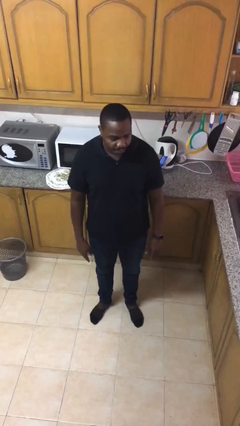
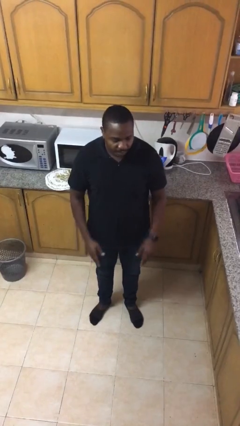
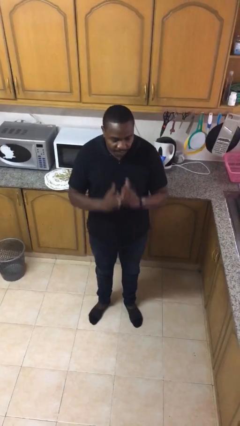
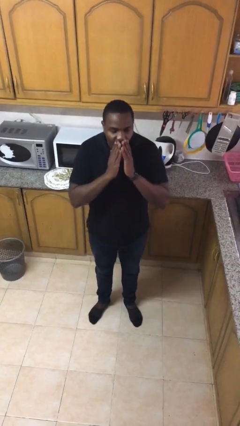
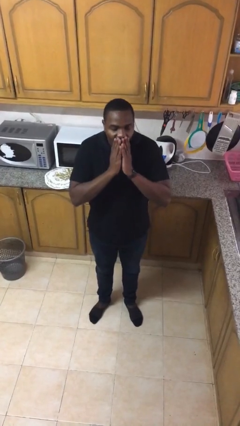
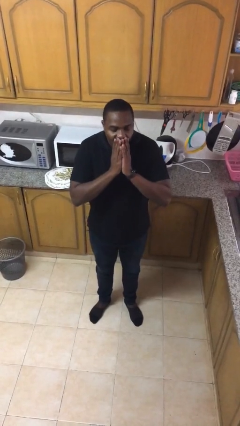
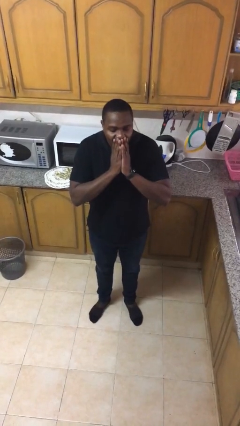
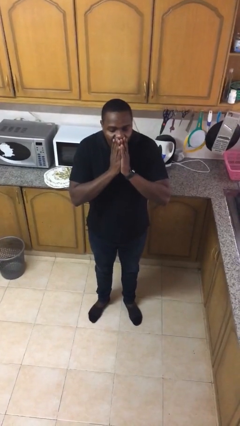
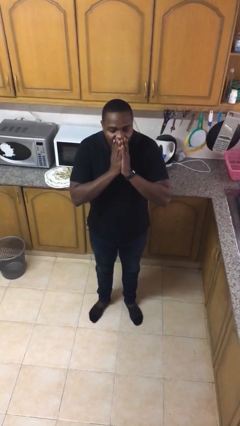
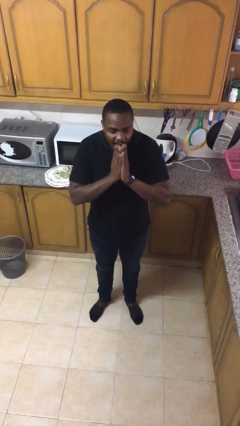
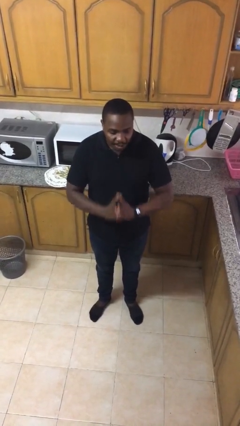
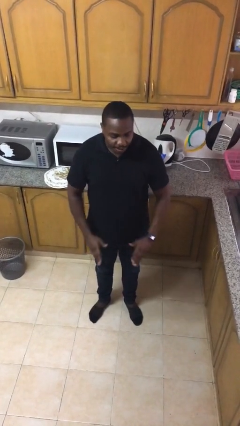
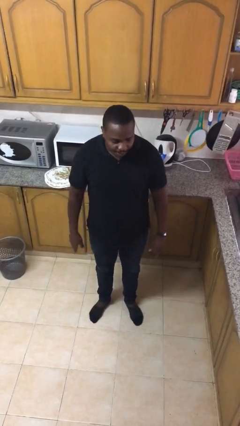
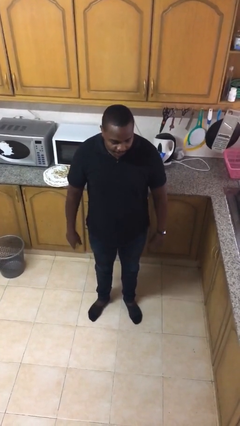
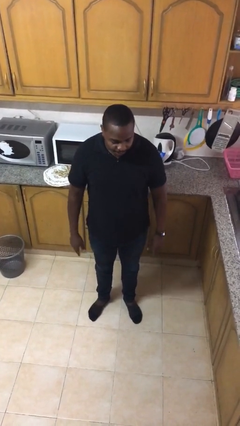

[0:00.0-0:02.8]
person yawns

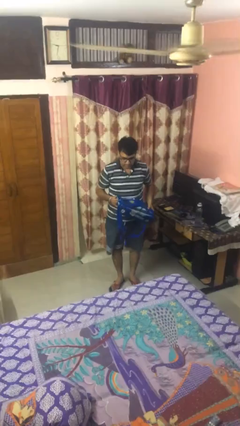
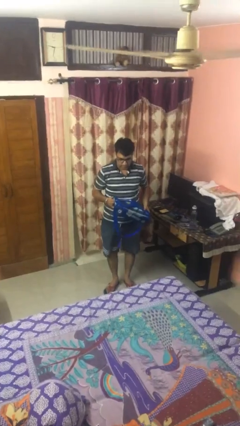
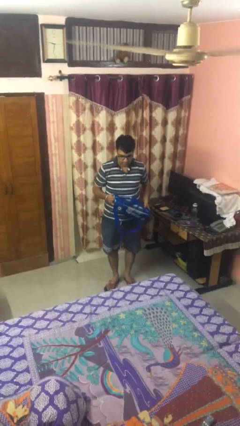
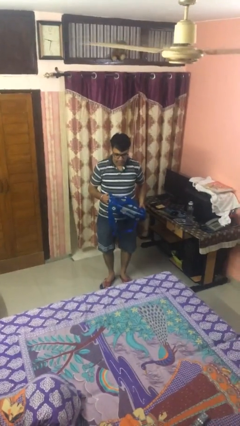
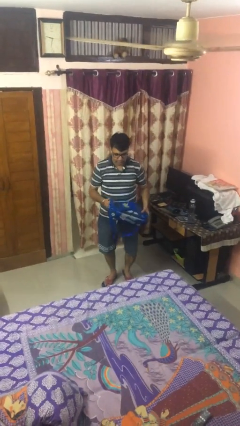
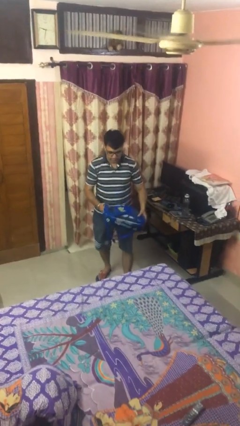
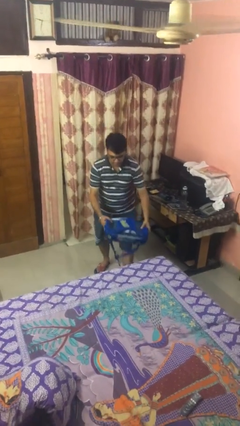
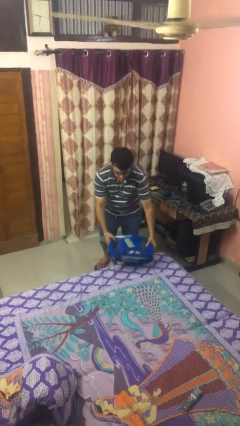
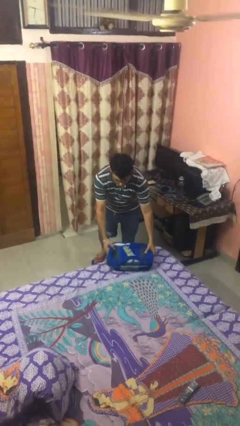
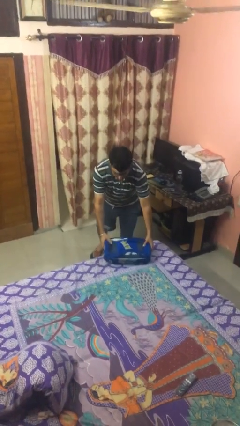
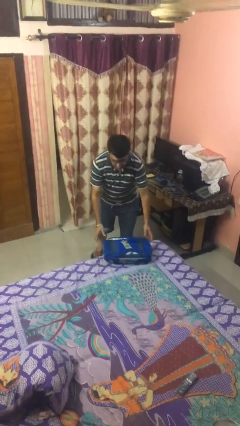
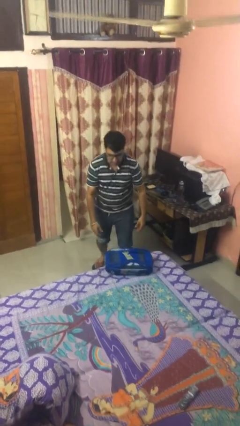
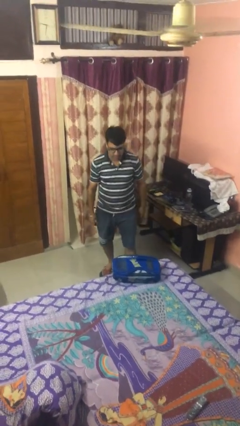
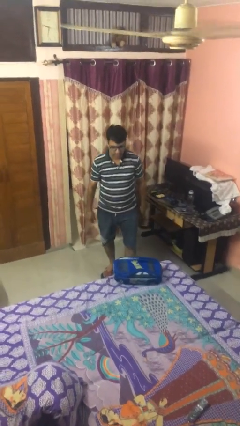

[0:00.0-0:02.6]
person puts down object on bed

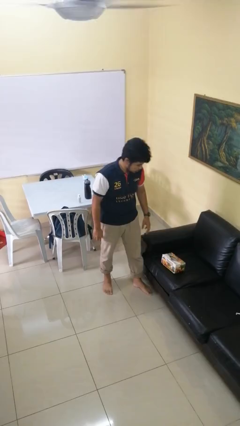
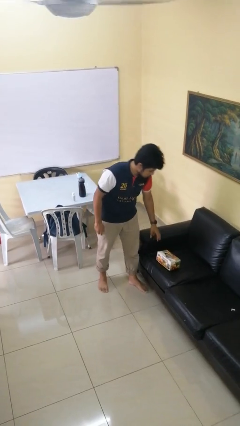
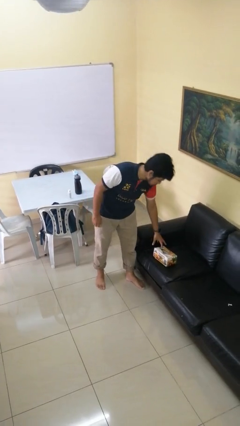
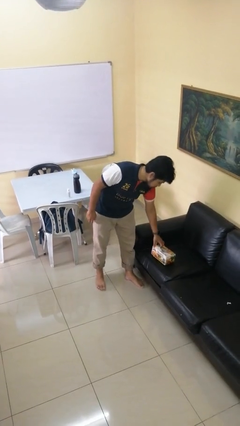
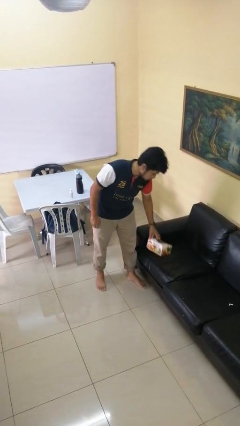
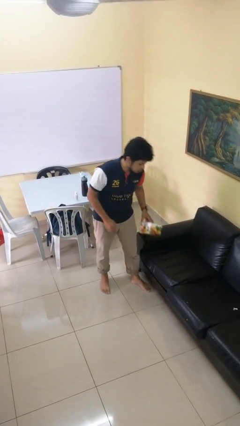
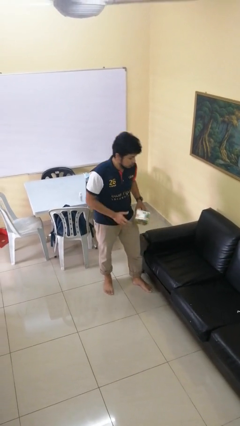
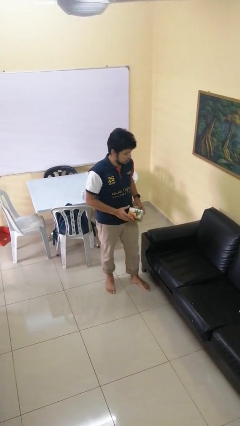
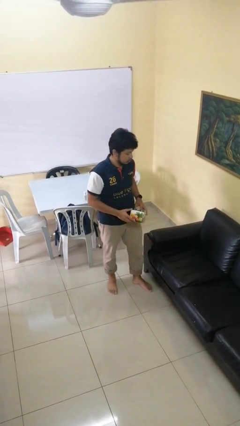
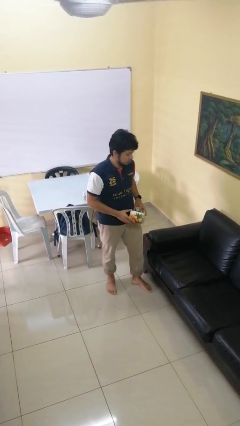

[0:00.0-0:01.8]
person picks up object from couch

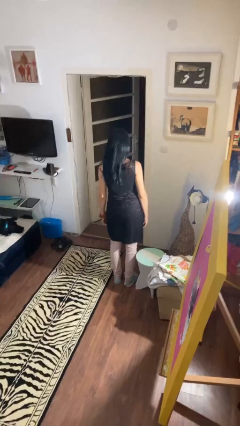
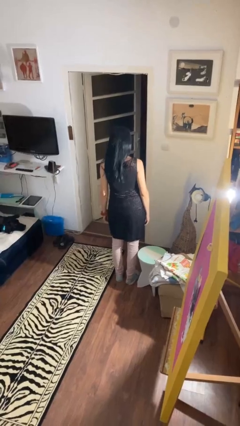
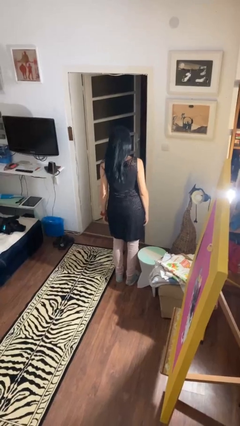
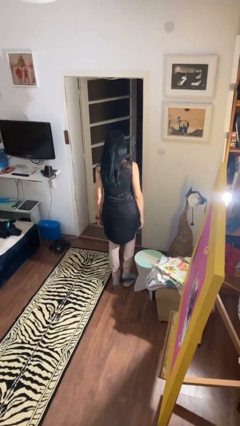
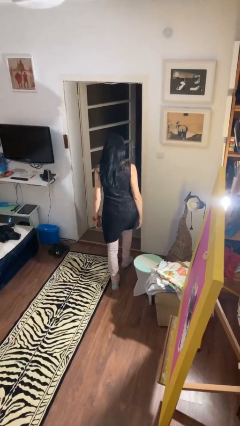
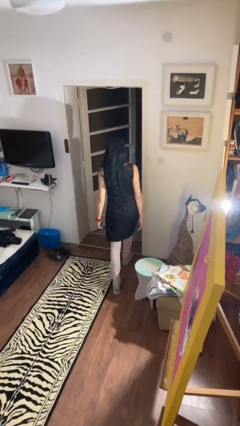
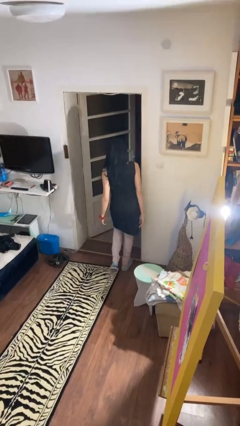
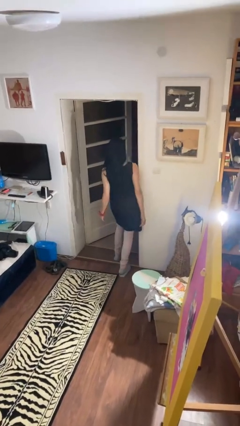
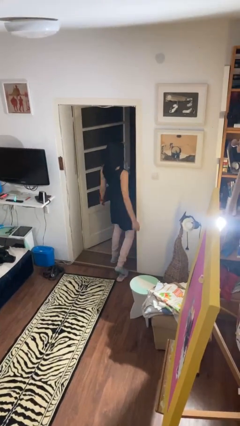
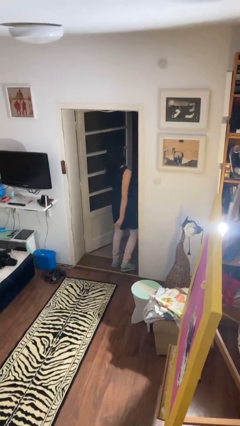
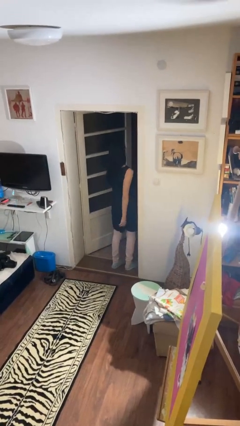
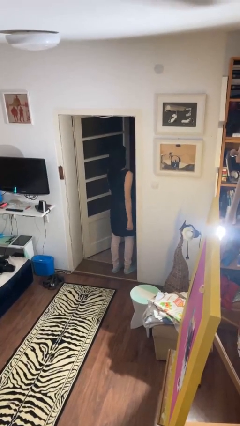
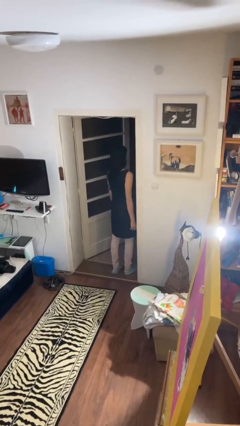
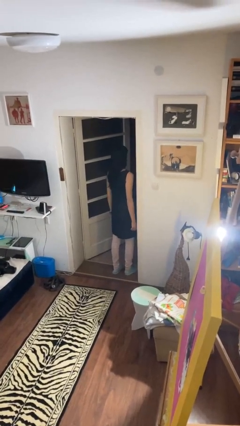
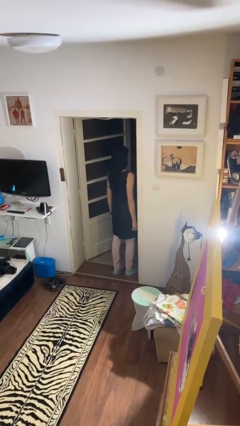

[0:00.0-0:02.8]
person bumps into wall

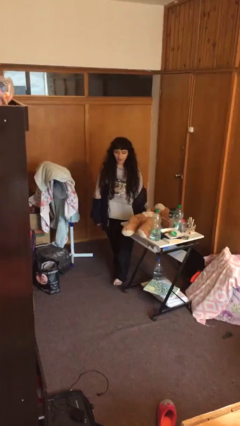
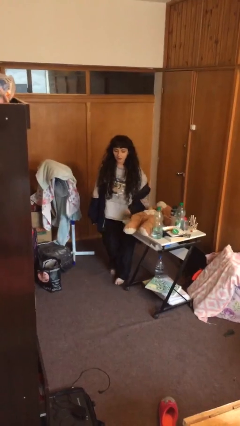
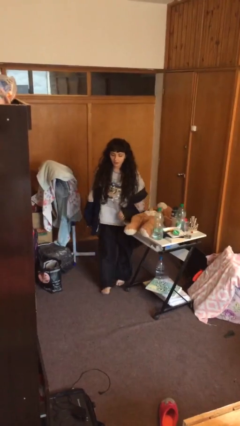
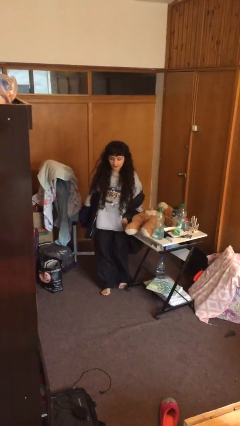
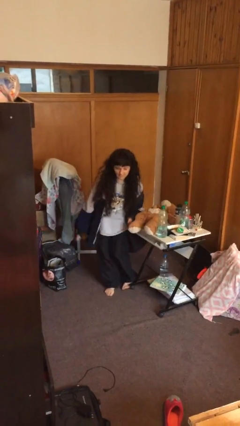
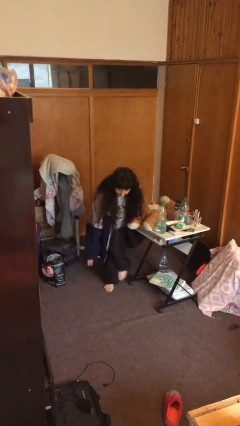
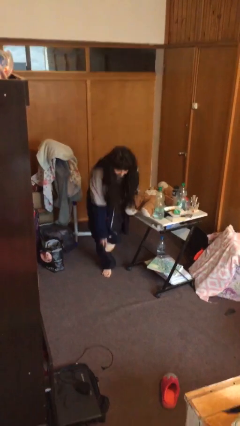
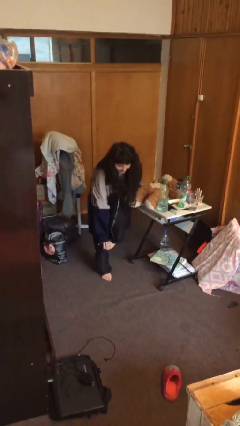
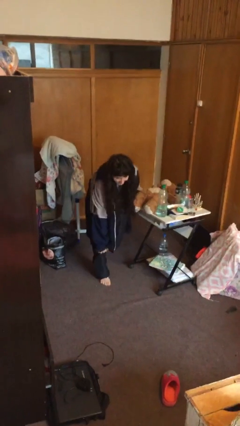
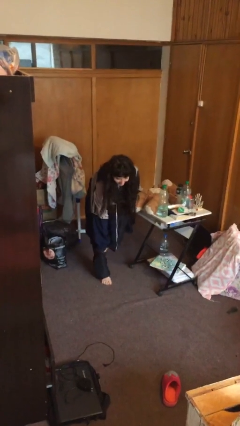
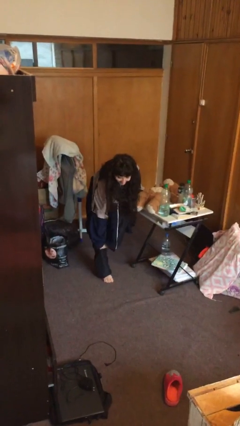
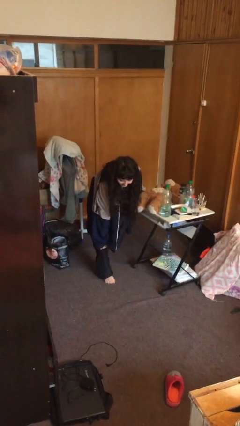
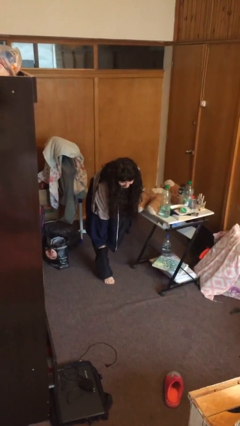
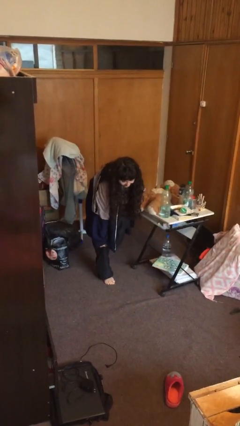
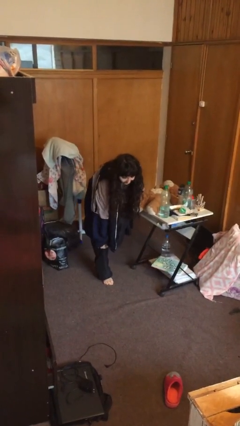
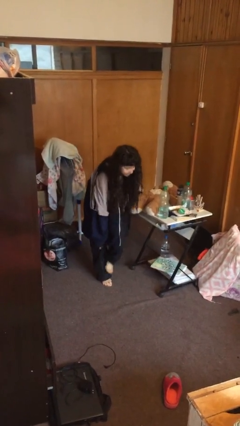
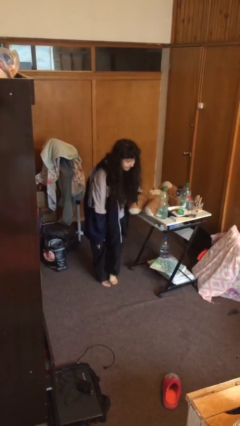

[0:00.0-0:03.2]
person stubs toe

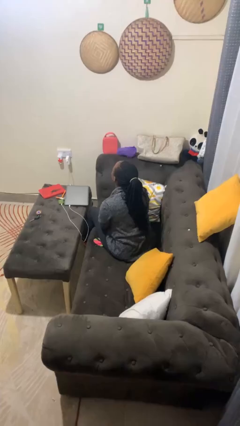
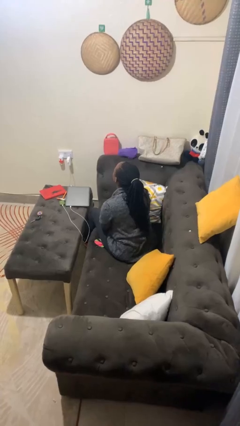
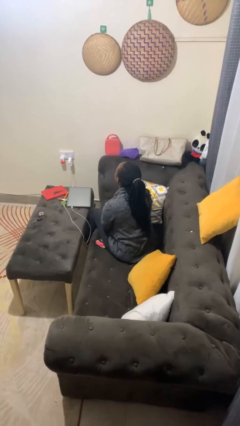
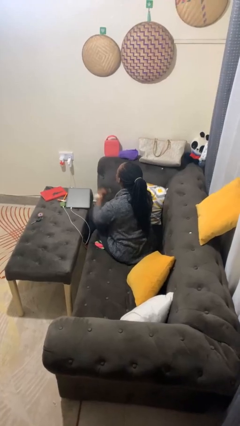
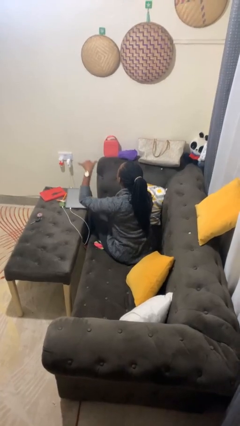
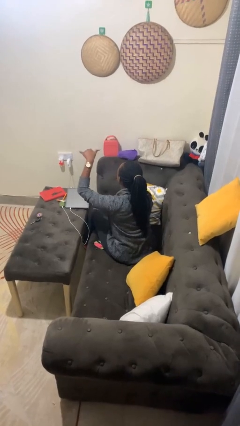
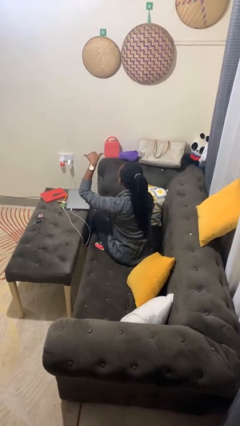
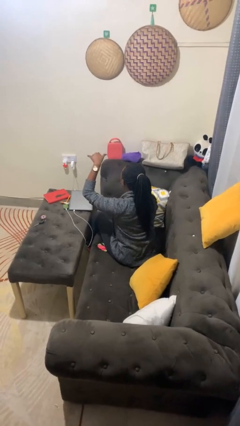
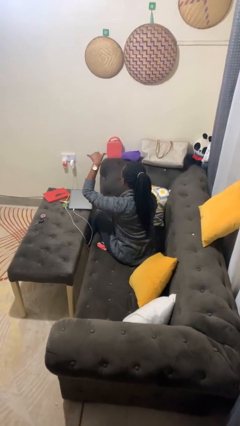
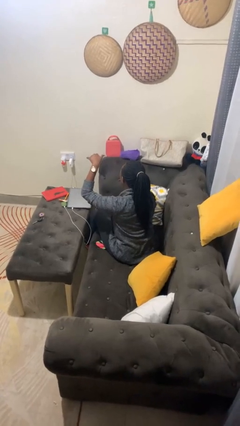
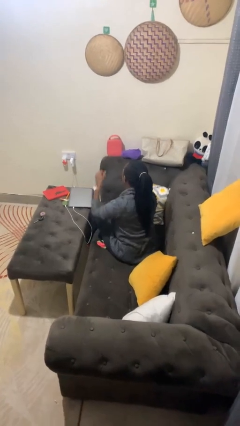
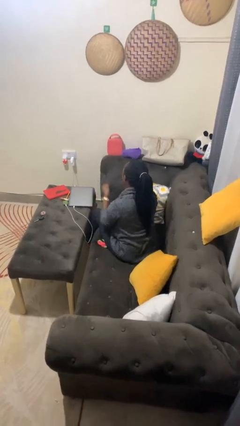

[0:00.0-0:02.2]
person gestures hang loose

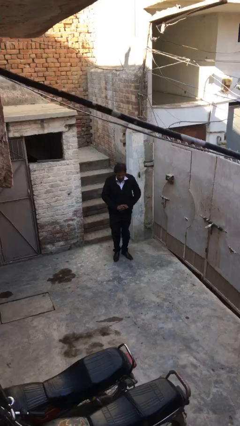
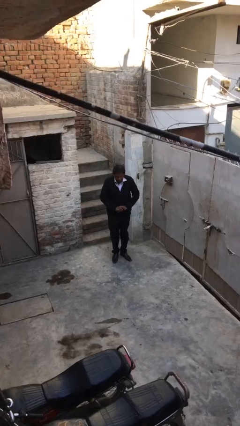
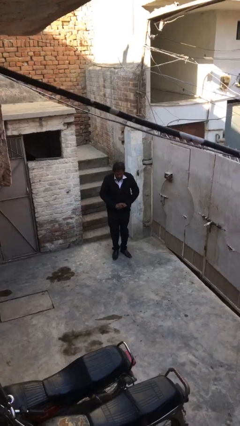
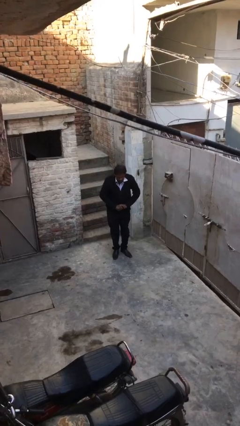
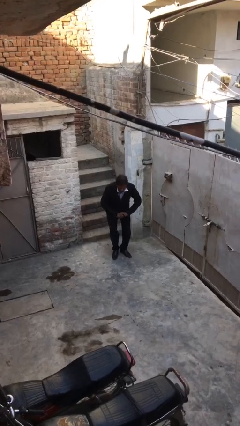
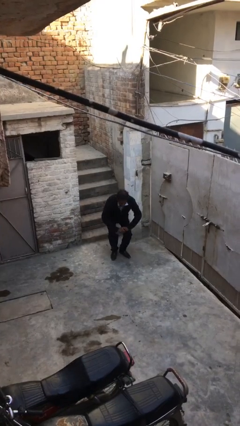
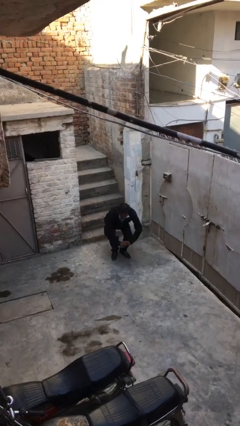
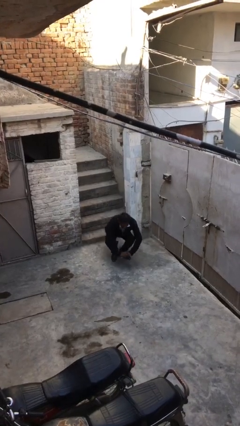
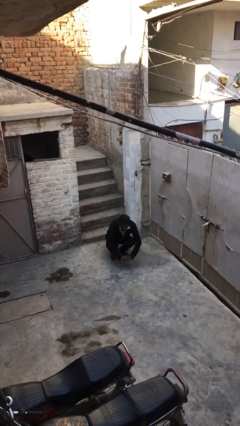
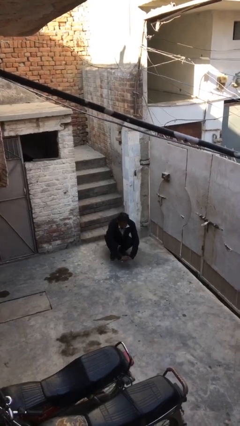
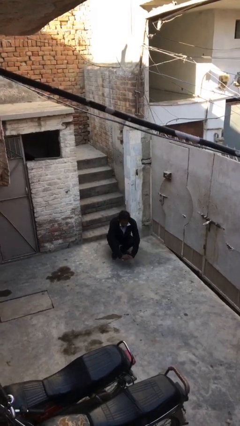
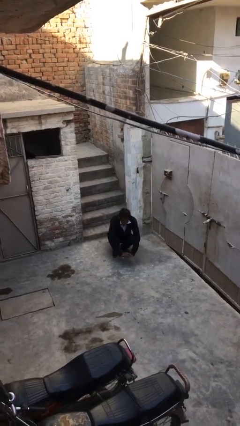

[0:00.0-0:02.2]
person sits down
